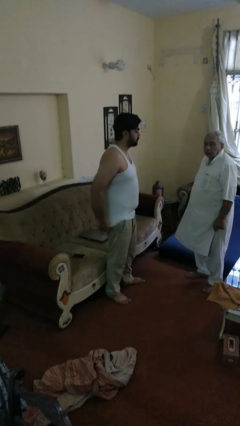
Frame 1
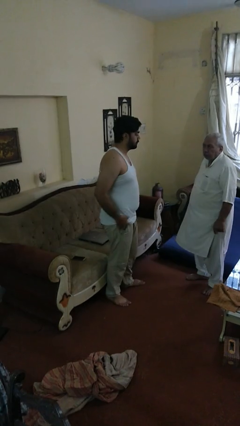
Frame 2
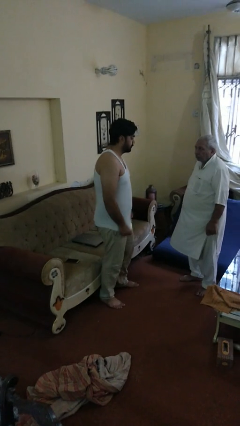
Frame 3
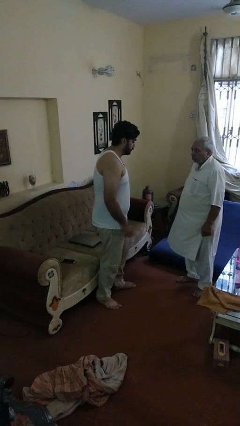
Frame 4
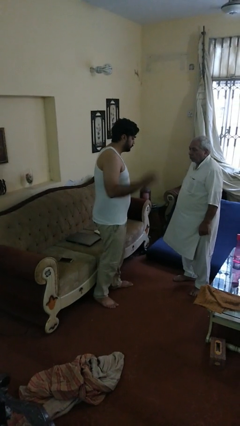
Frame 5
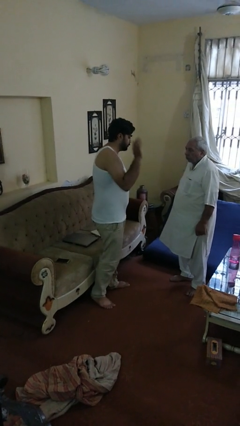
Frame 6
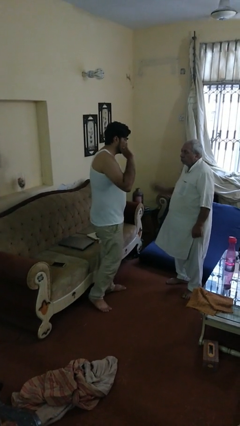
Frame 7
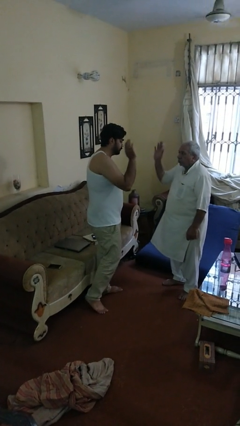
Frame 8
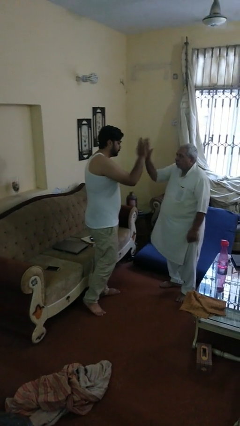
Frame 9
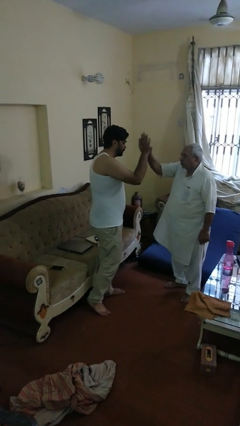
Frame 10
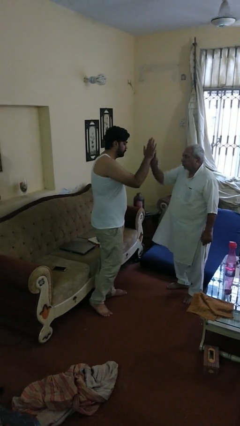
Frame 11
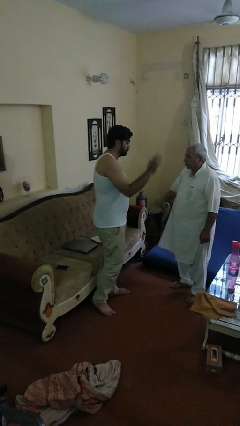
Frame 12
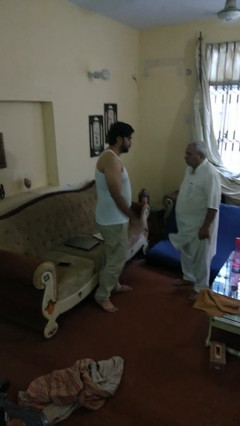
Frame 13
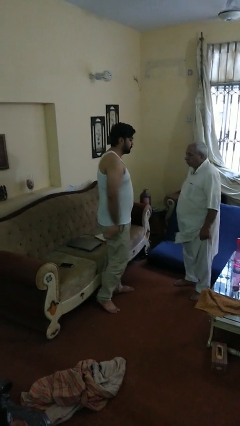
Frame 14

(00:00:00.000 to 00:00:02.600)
person highfives hand

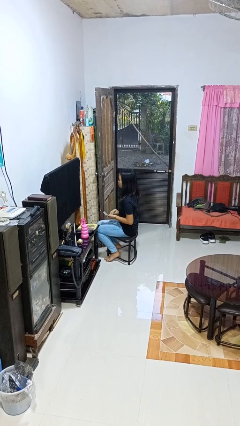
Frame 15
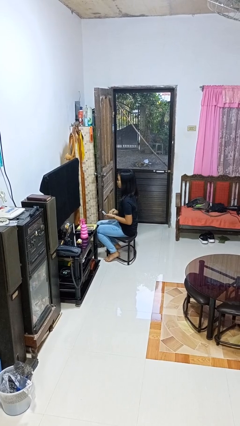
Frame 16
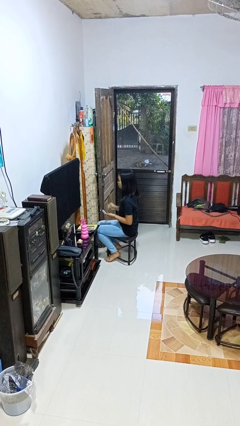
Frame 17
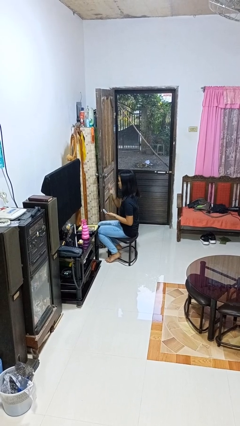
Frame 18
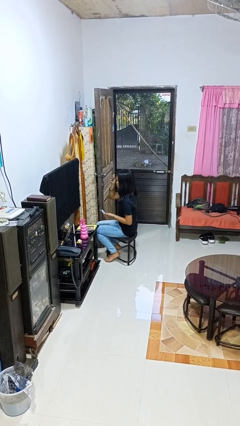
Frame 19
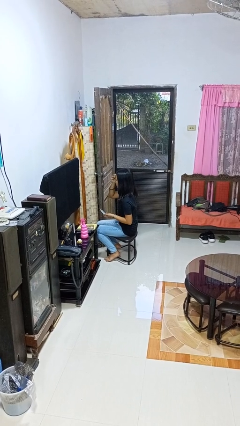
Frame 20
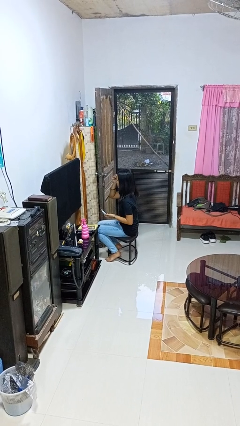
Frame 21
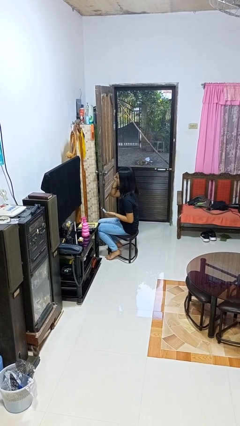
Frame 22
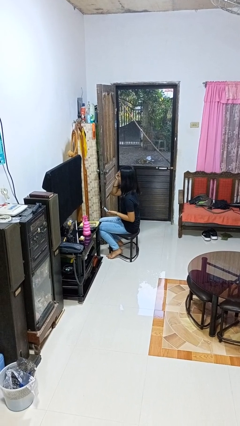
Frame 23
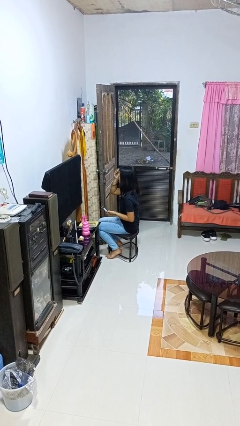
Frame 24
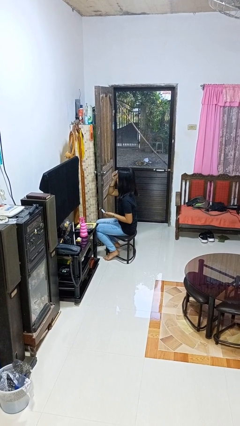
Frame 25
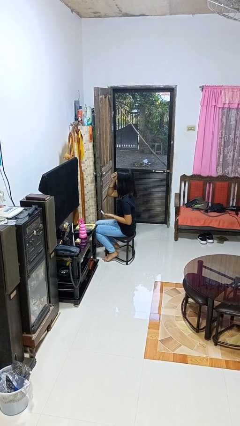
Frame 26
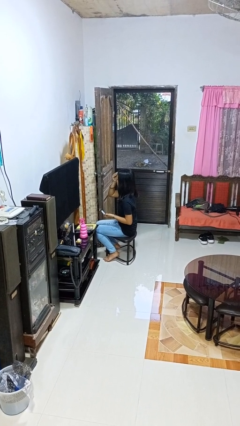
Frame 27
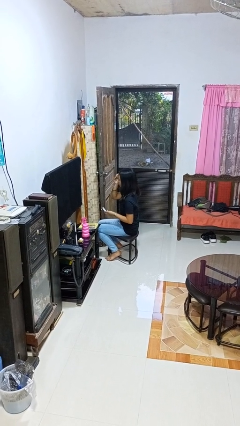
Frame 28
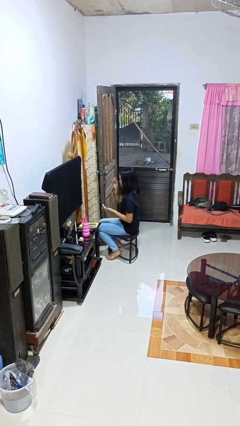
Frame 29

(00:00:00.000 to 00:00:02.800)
person applies foundation makeup

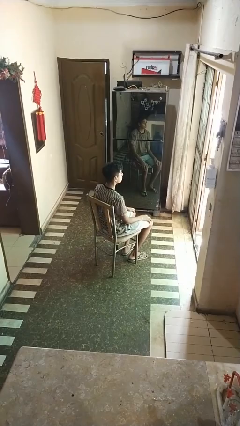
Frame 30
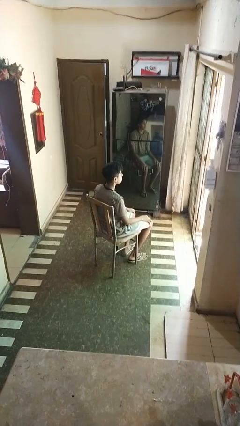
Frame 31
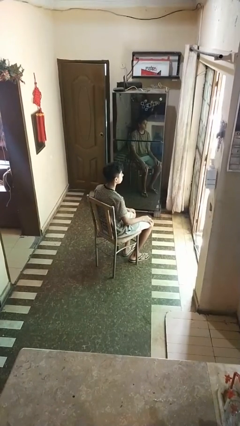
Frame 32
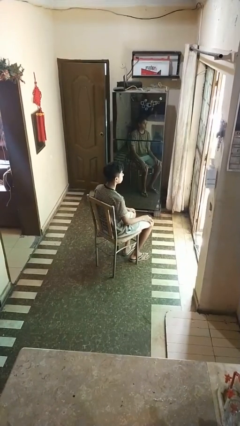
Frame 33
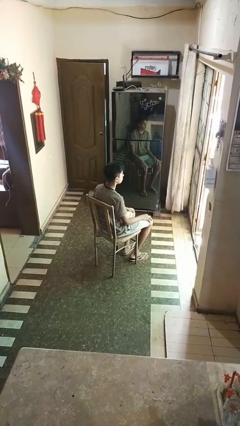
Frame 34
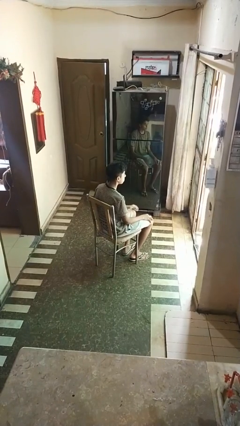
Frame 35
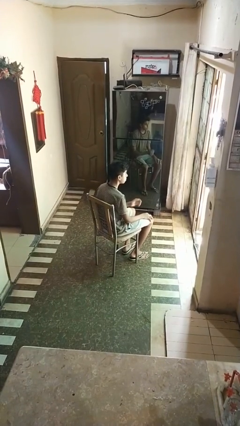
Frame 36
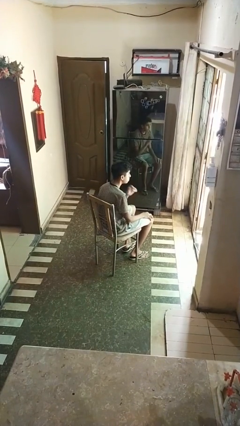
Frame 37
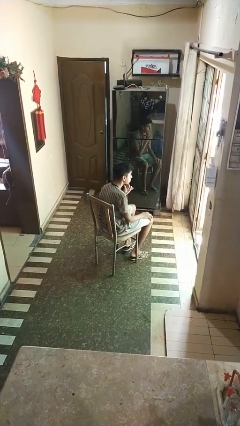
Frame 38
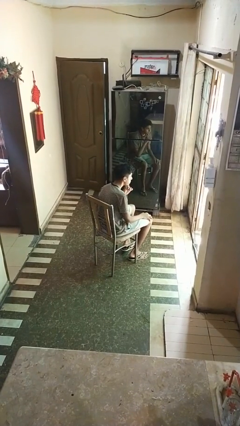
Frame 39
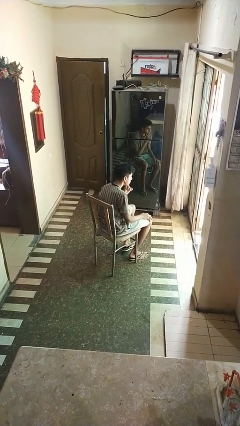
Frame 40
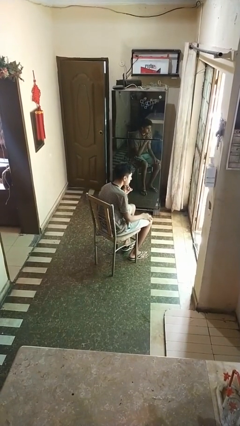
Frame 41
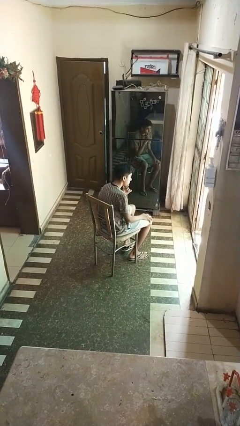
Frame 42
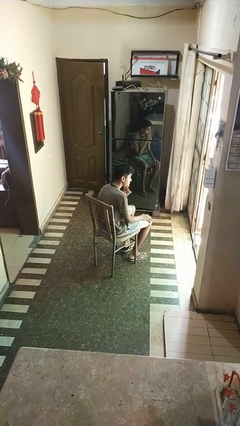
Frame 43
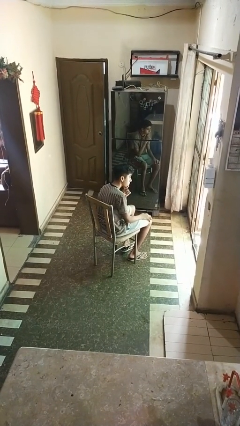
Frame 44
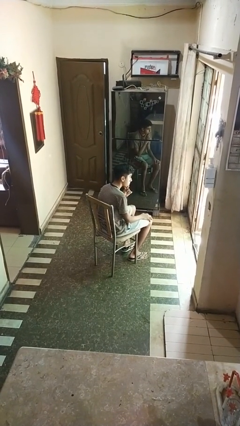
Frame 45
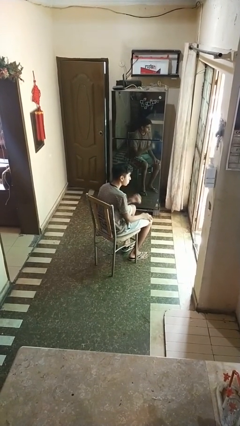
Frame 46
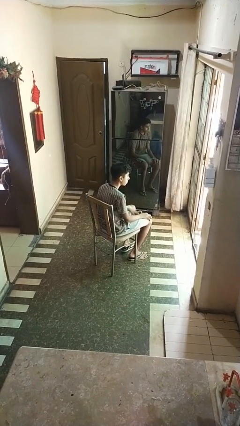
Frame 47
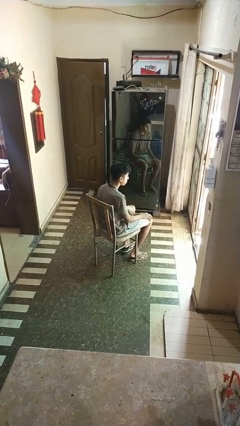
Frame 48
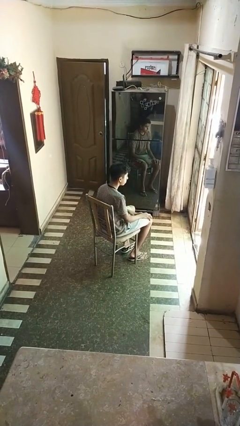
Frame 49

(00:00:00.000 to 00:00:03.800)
person strokes chin

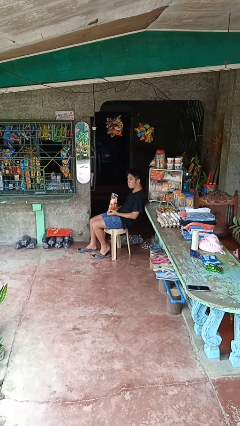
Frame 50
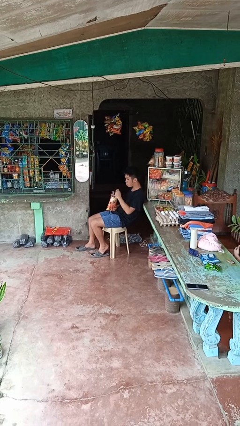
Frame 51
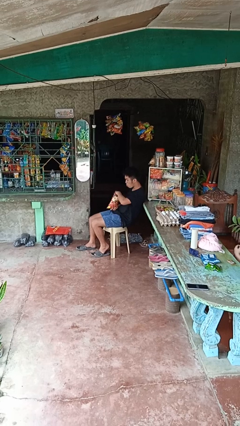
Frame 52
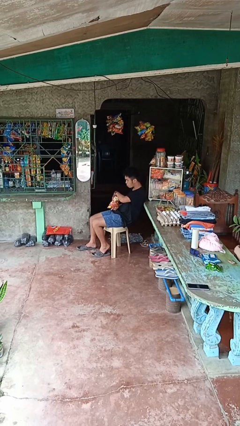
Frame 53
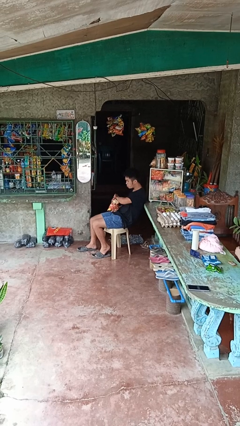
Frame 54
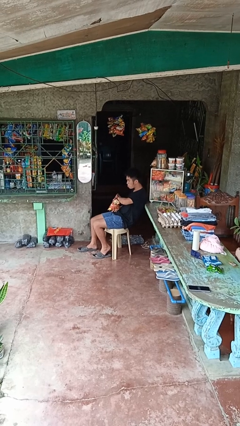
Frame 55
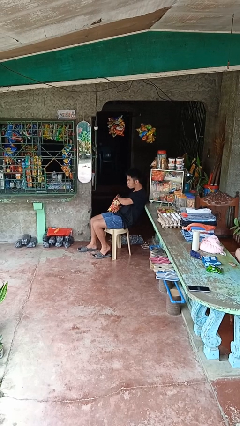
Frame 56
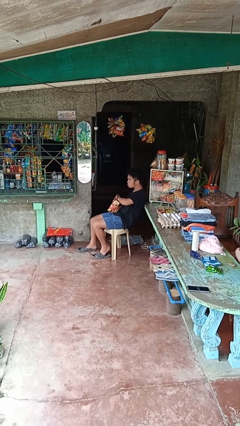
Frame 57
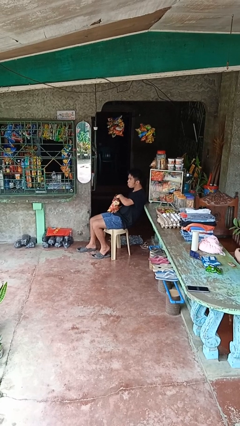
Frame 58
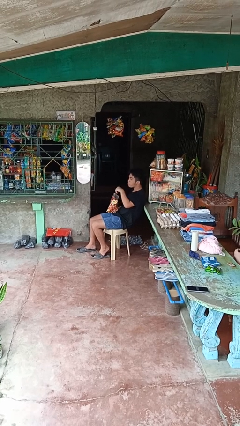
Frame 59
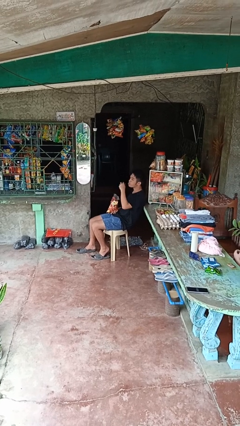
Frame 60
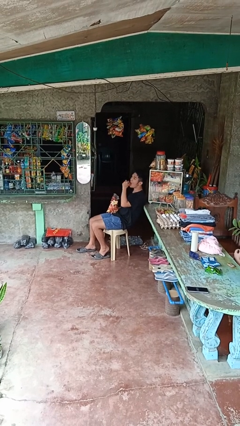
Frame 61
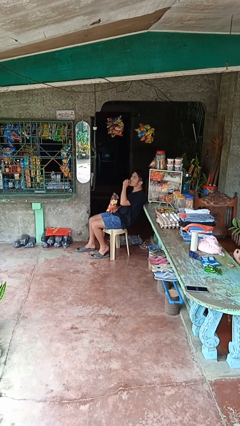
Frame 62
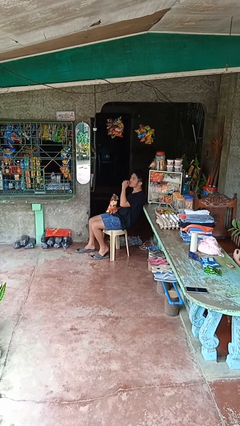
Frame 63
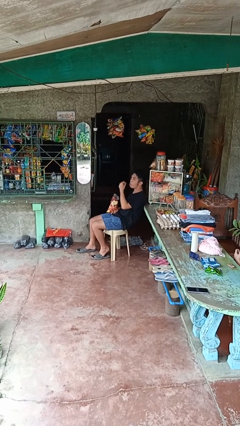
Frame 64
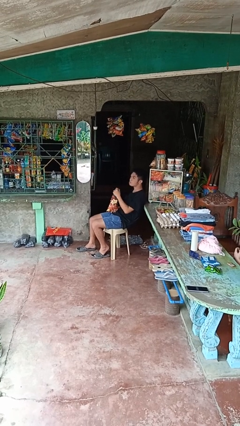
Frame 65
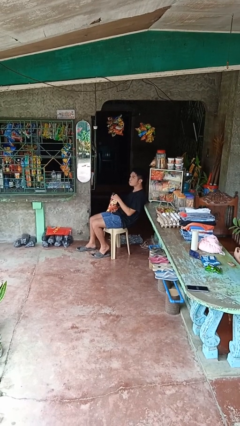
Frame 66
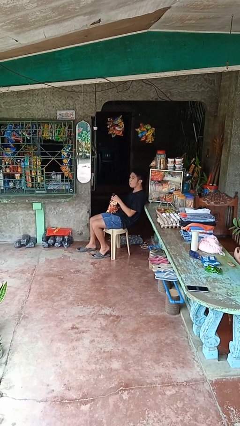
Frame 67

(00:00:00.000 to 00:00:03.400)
person eats snack from bag

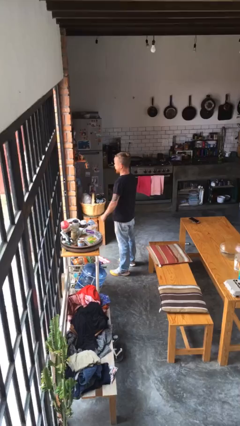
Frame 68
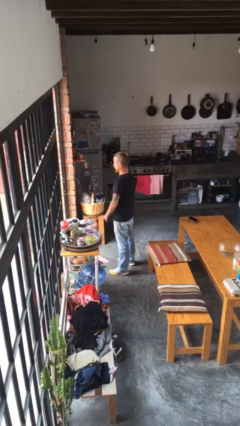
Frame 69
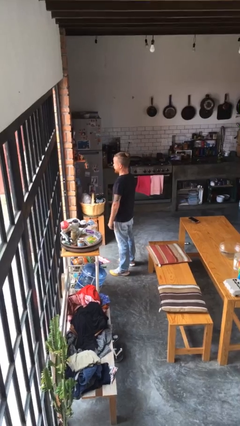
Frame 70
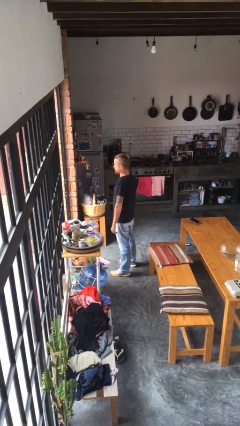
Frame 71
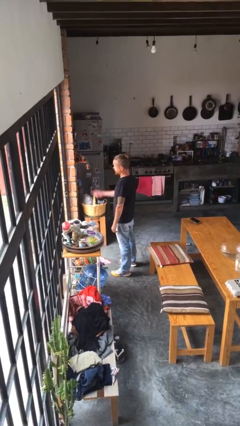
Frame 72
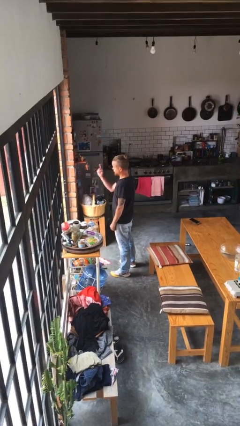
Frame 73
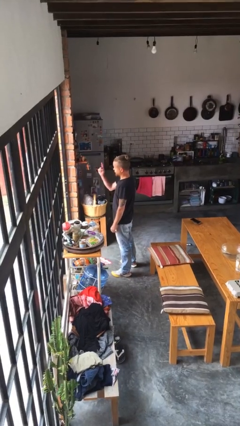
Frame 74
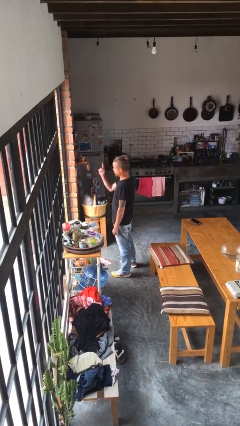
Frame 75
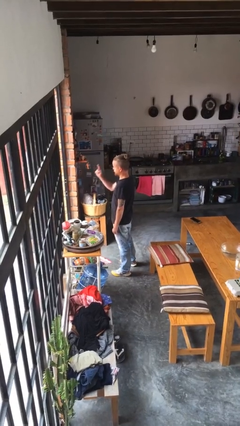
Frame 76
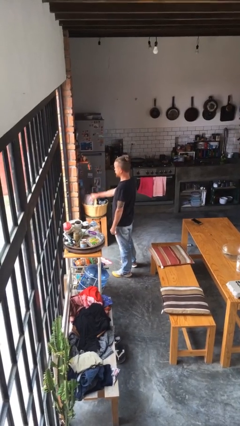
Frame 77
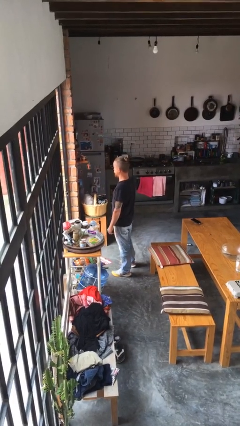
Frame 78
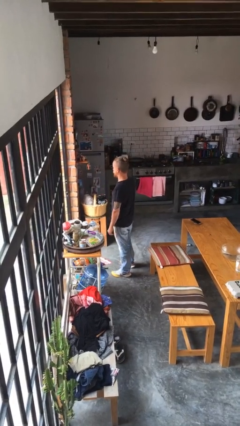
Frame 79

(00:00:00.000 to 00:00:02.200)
person gestures number one

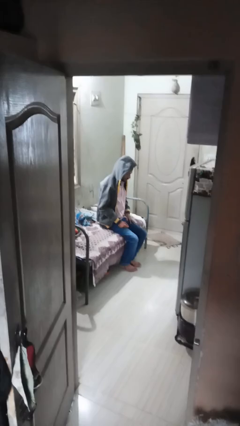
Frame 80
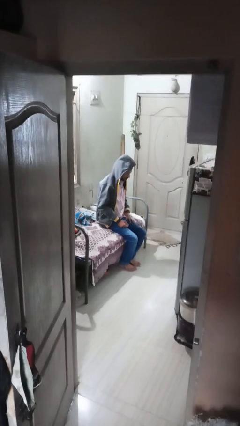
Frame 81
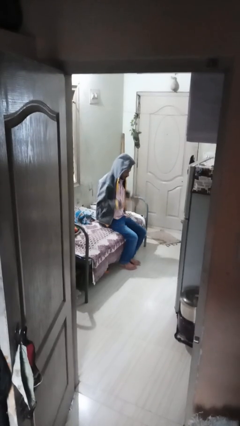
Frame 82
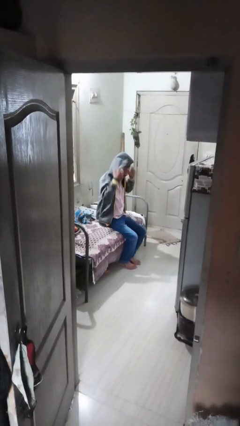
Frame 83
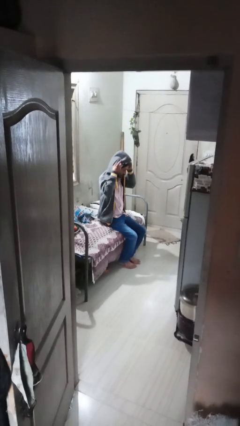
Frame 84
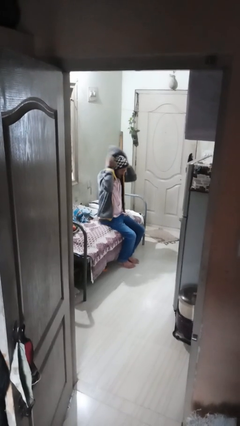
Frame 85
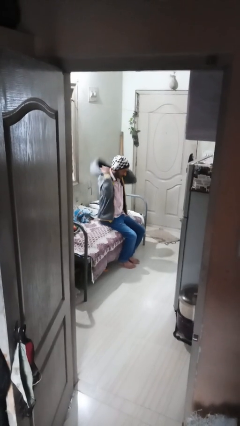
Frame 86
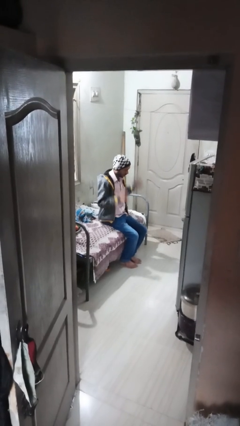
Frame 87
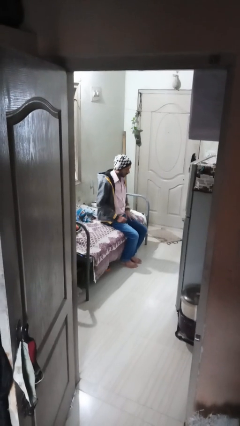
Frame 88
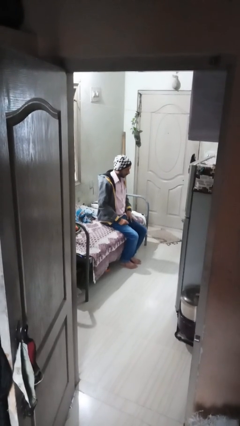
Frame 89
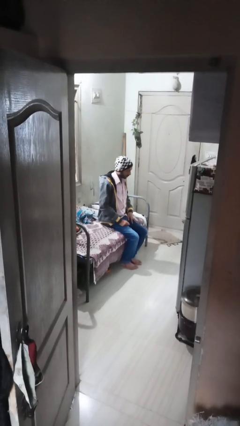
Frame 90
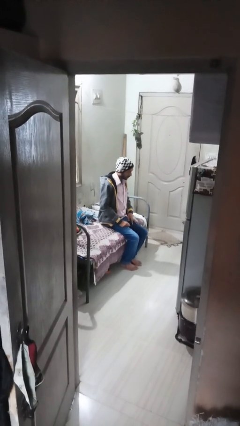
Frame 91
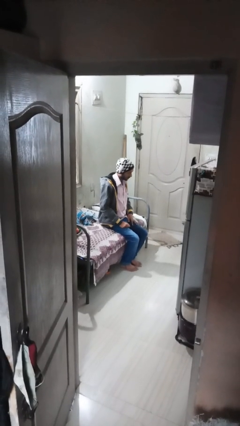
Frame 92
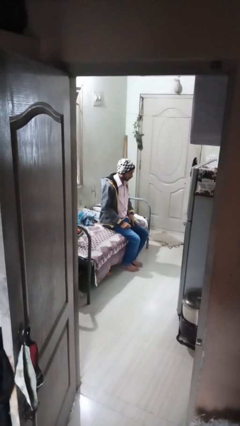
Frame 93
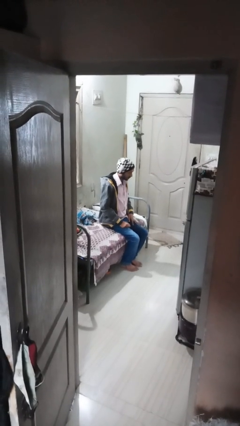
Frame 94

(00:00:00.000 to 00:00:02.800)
person takes off hoodie
